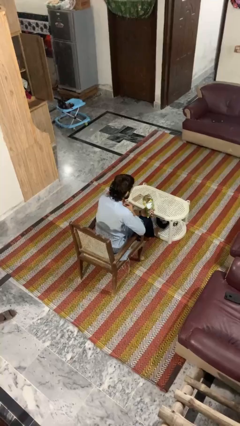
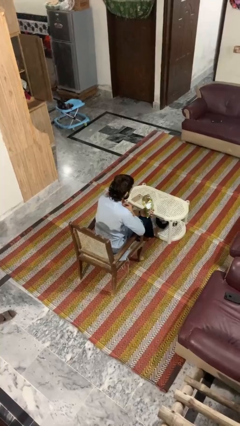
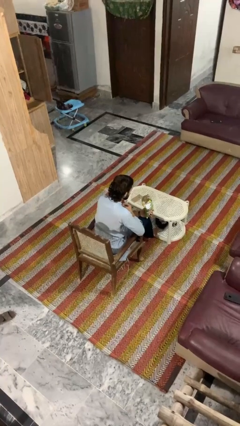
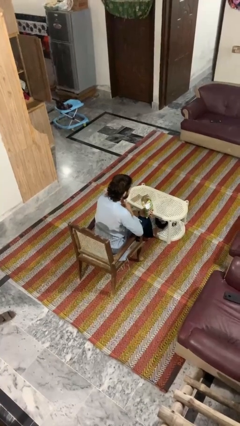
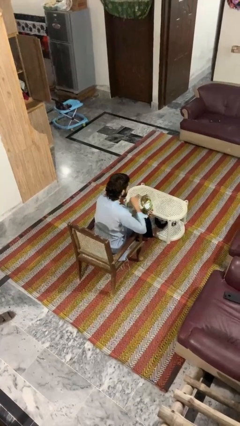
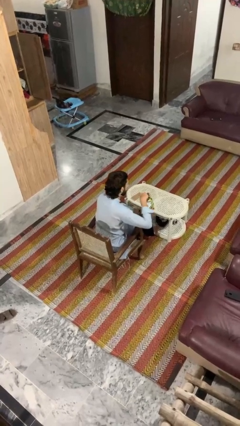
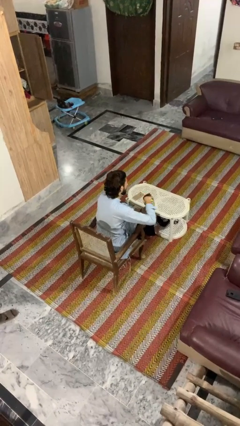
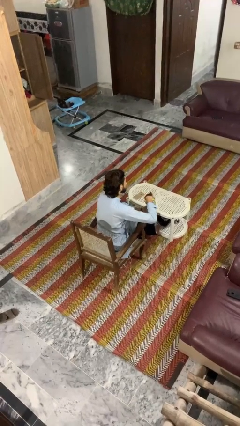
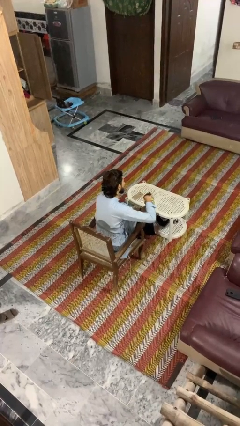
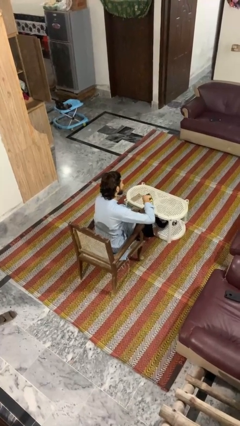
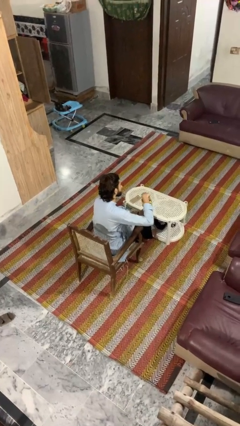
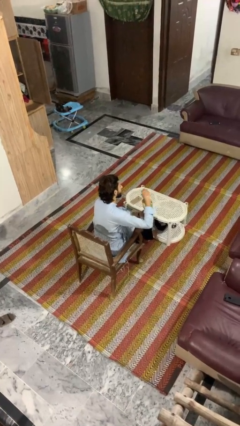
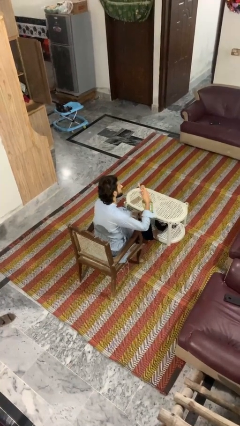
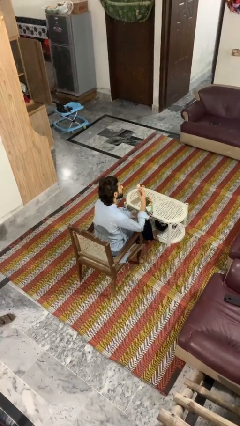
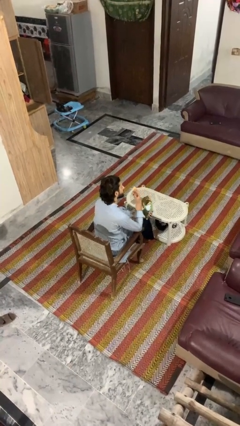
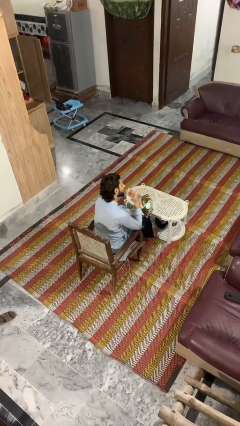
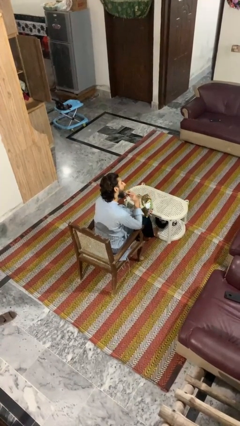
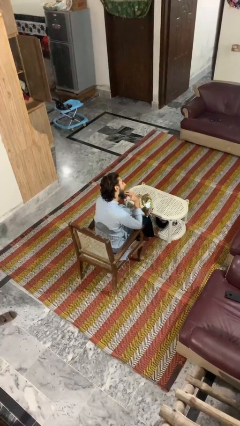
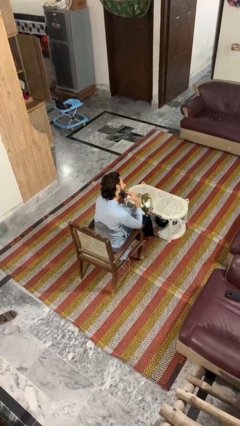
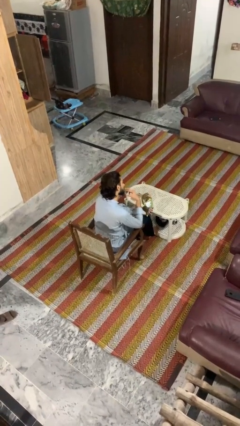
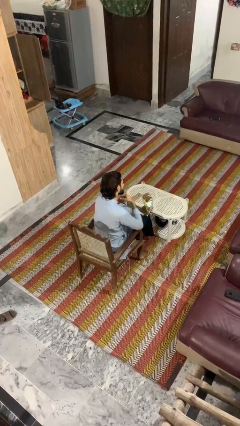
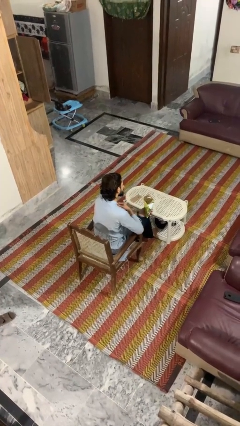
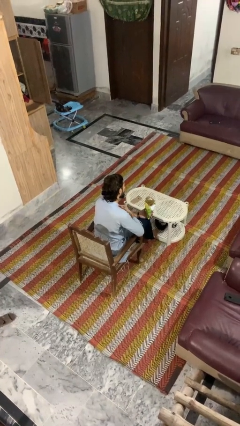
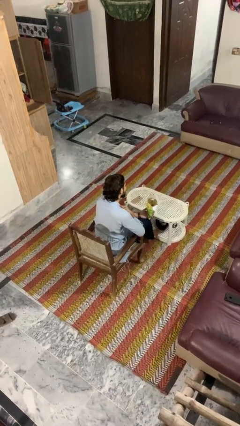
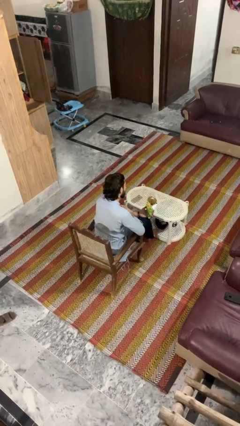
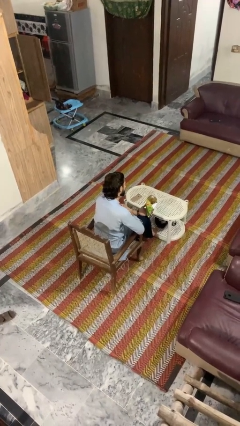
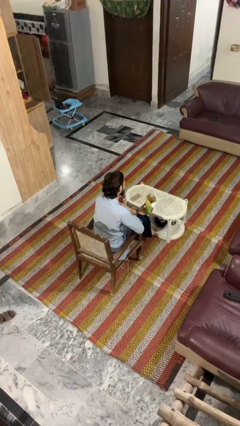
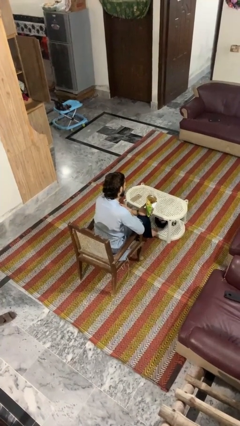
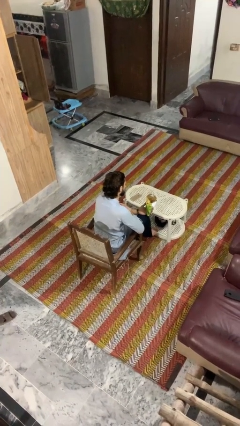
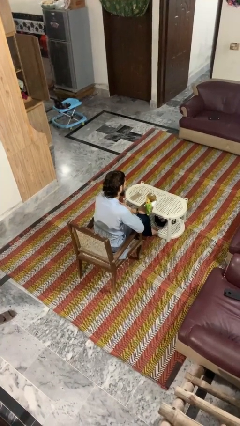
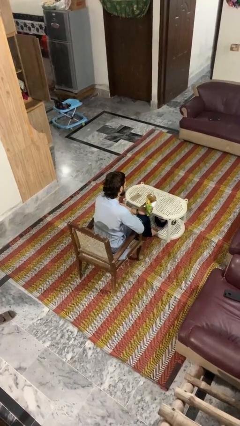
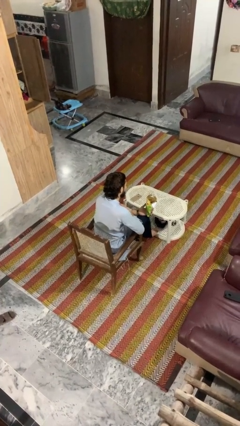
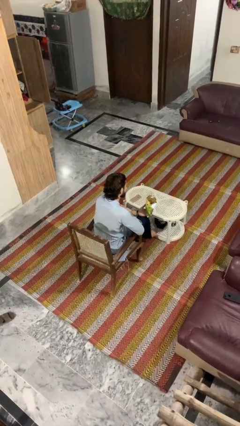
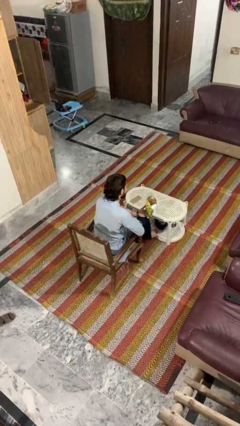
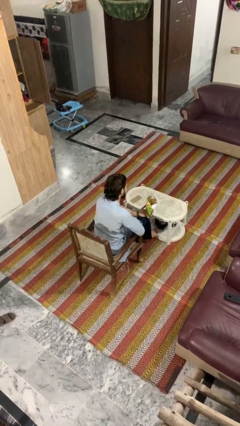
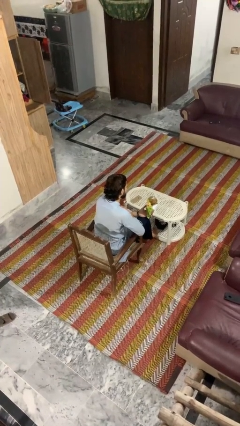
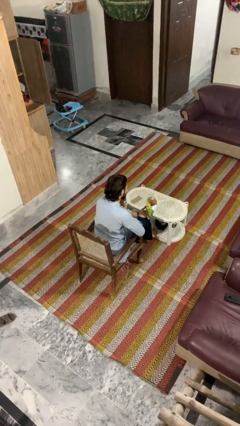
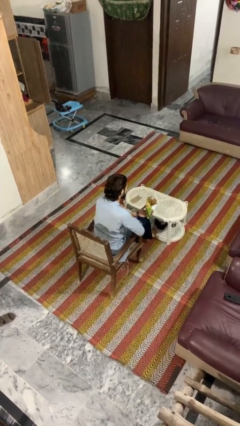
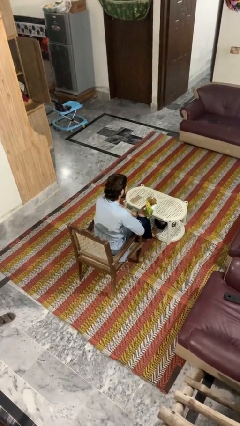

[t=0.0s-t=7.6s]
person eats snack from bag

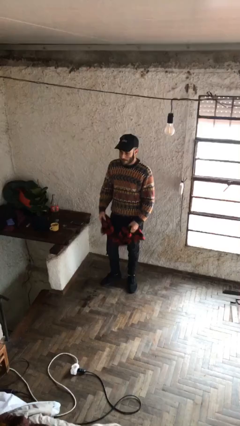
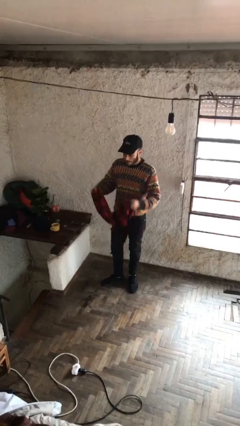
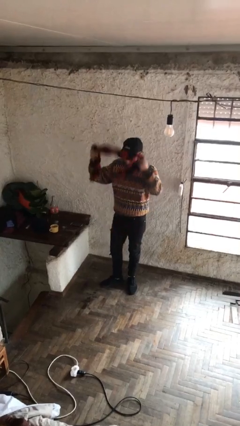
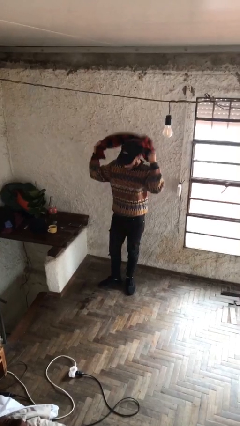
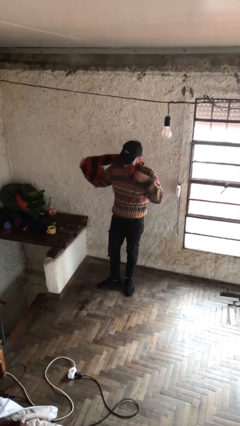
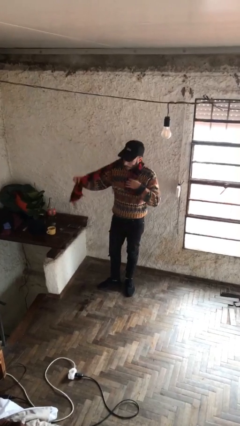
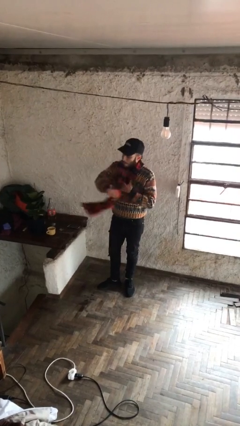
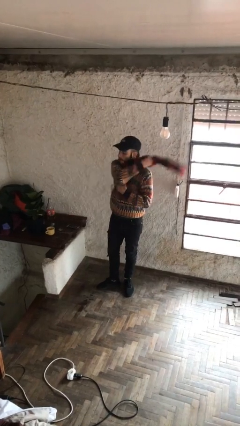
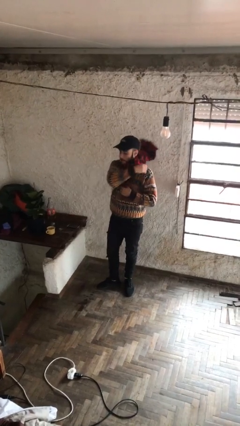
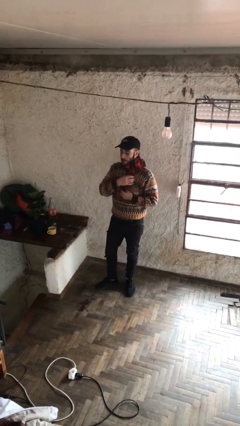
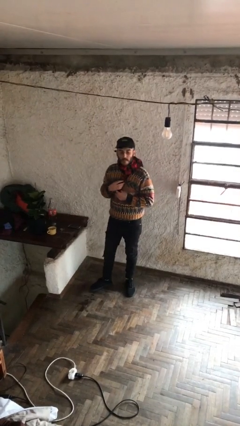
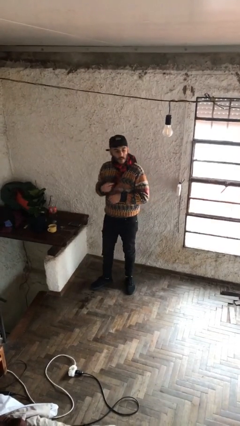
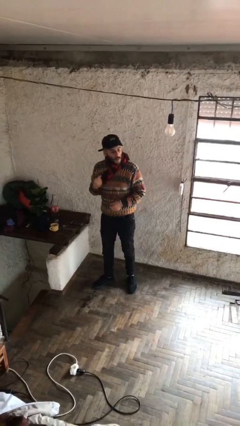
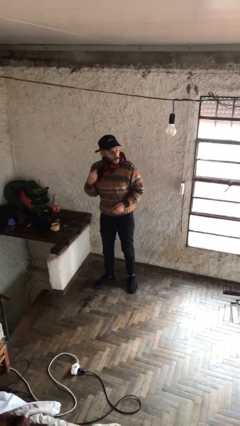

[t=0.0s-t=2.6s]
person puts on scarf

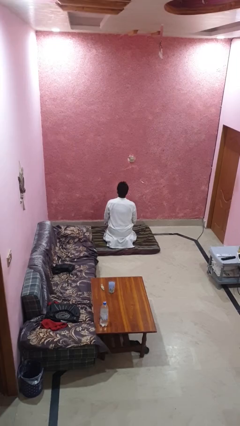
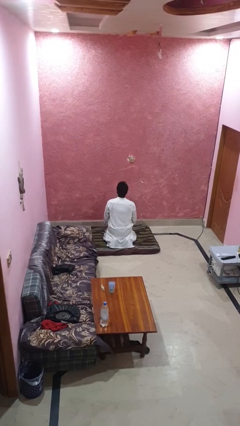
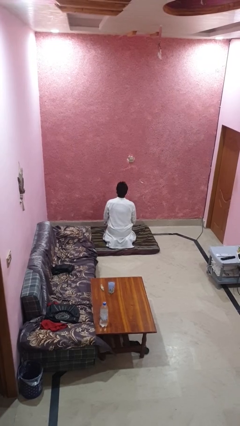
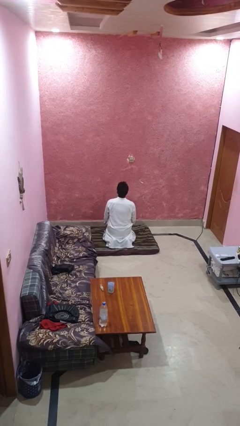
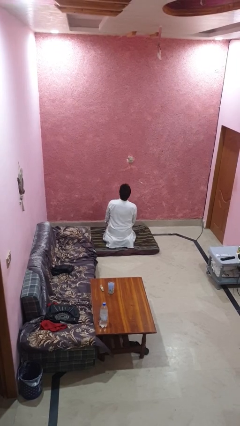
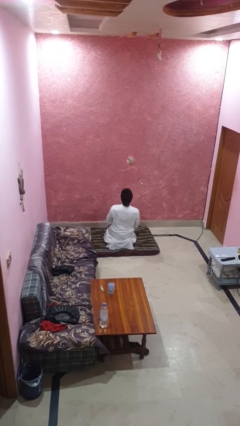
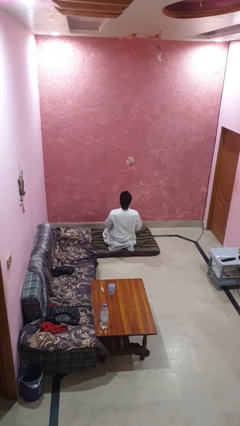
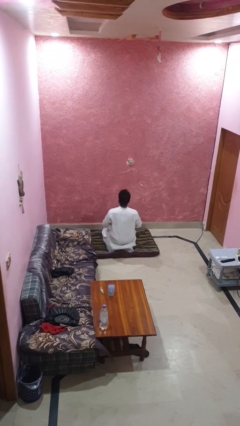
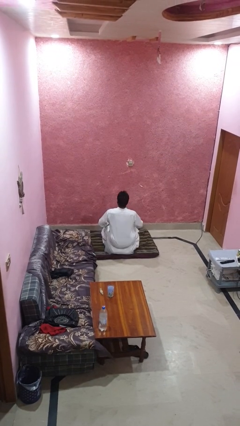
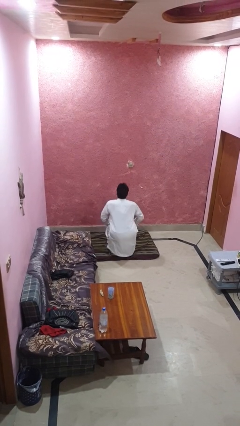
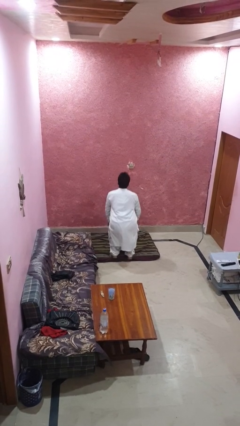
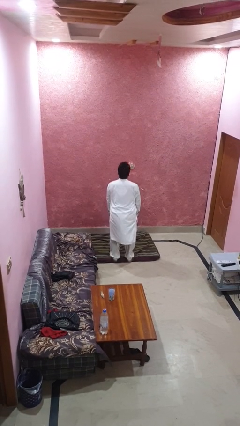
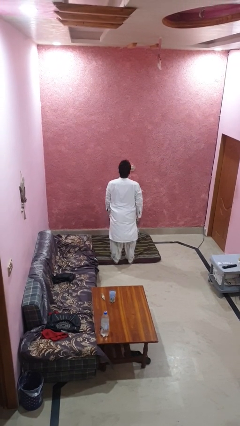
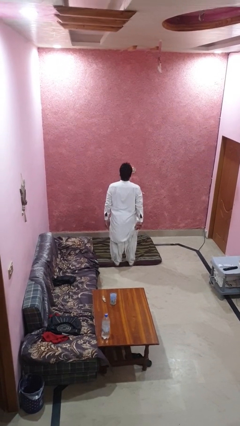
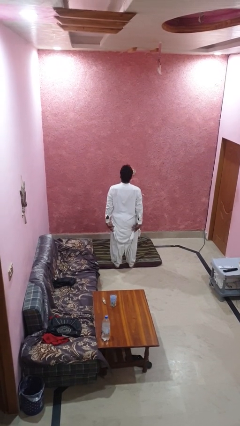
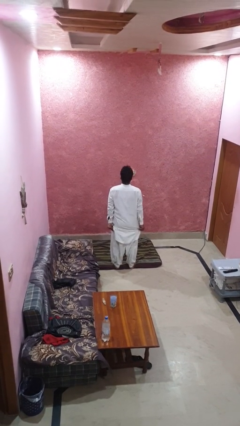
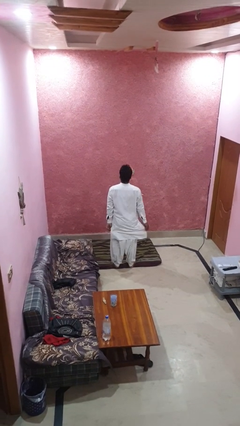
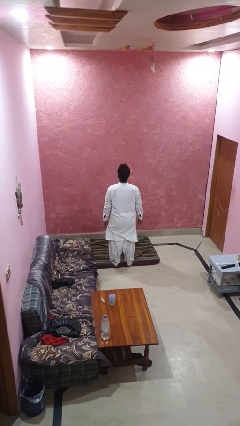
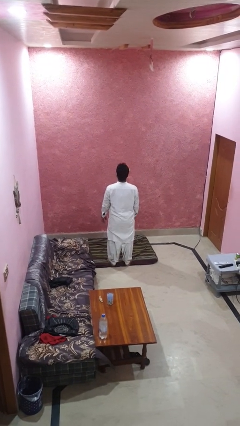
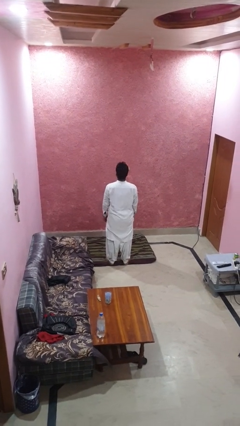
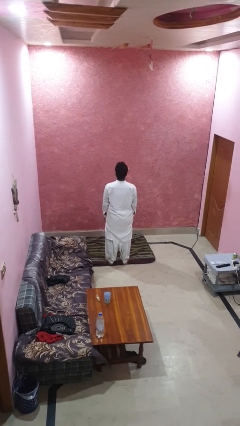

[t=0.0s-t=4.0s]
person stands up from floor

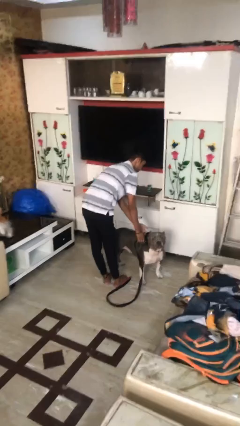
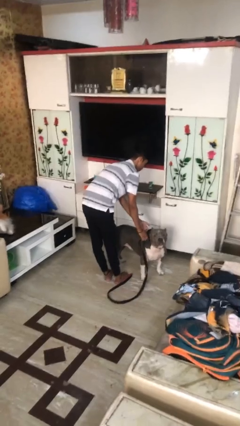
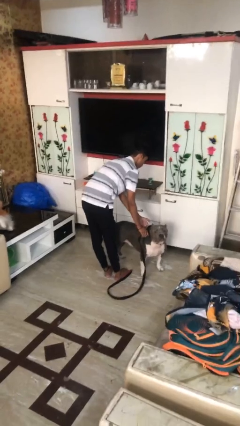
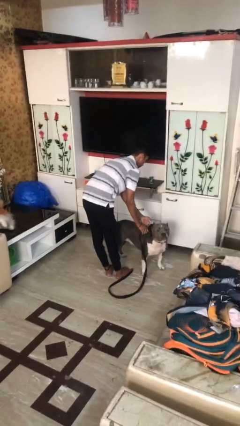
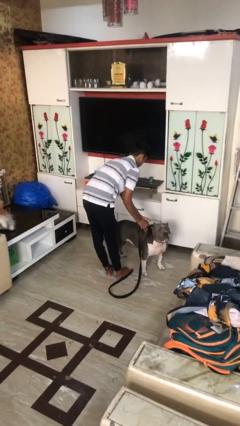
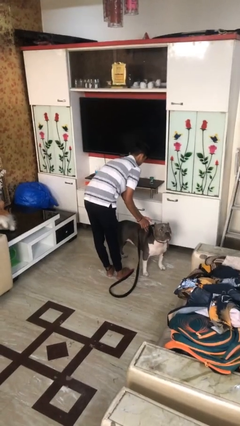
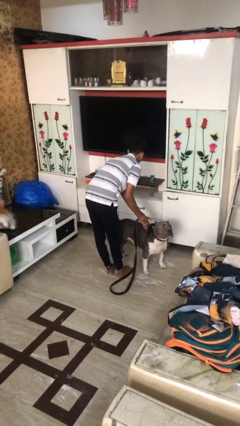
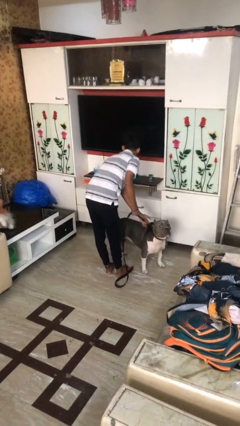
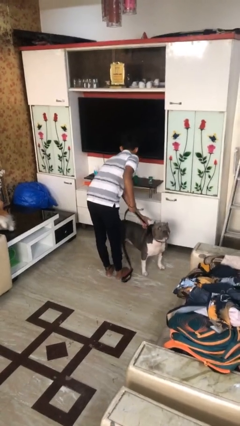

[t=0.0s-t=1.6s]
person attaches leash to dog

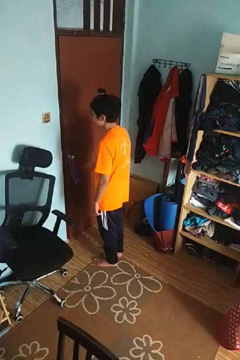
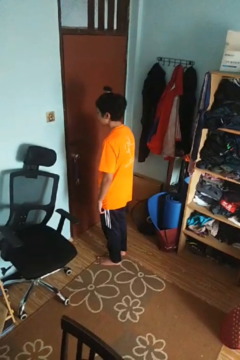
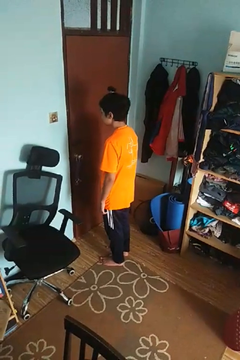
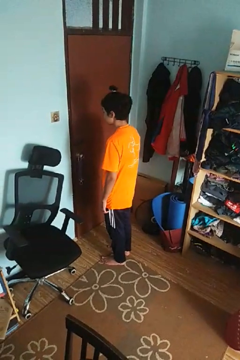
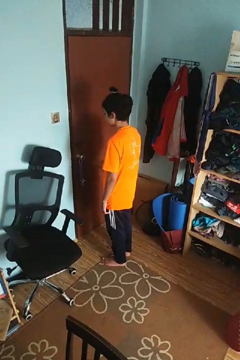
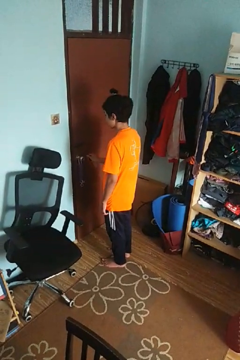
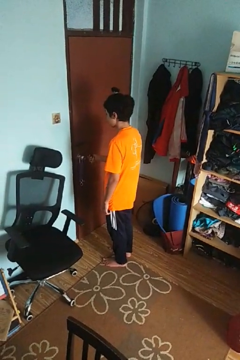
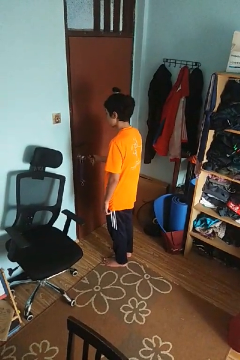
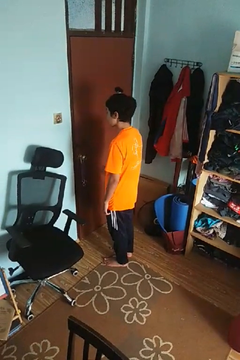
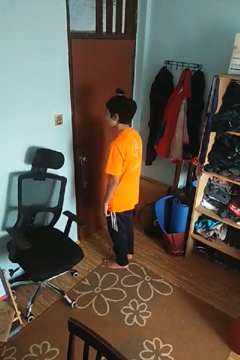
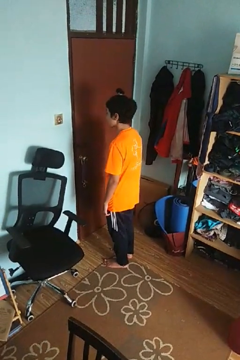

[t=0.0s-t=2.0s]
person locks door with keys

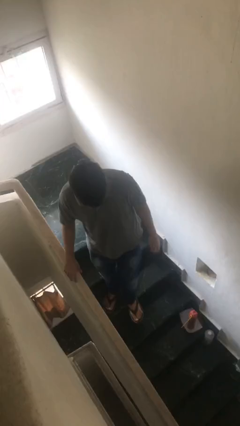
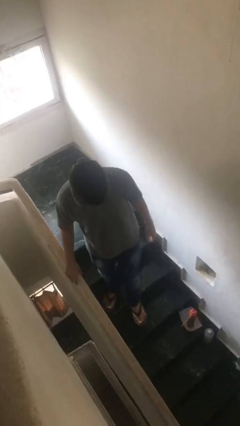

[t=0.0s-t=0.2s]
person climbs down stairs
